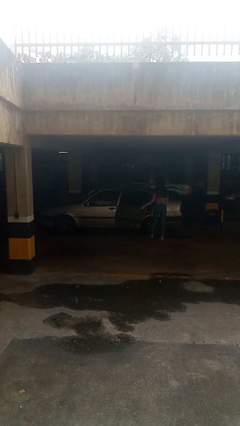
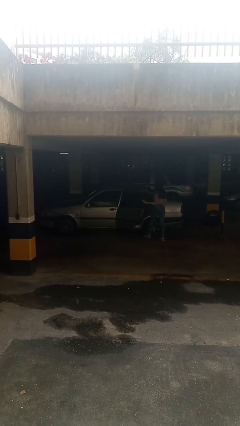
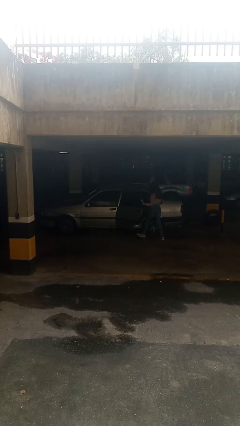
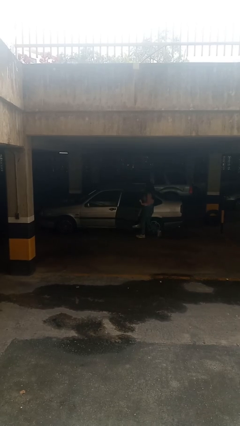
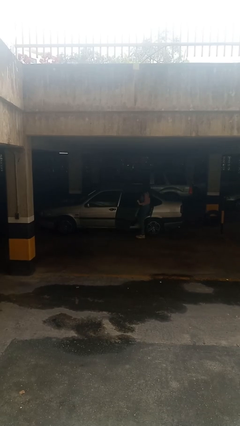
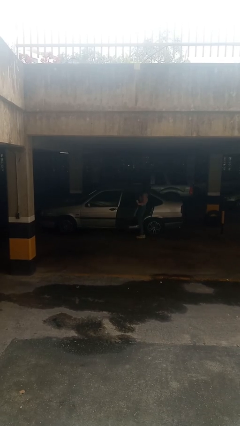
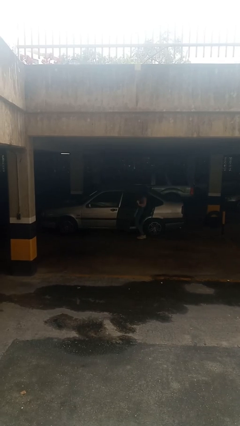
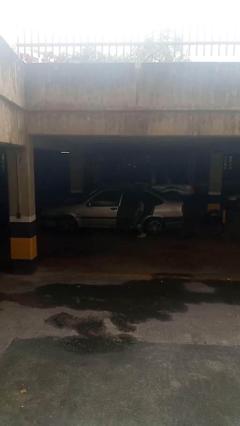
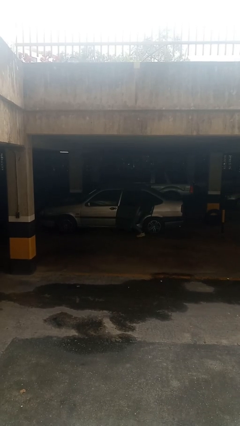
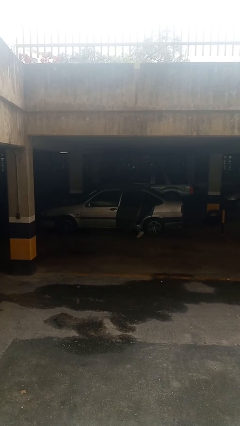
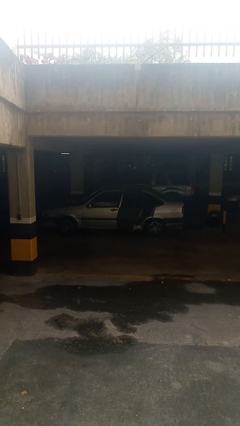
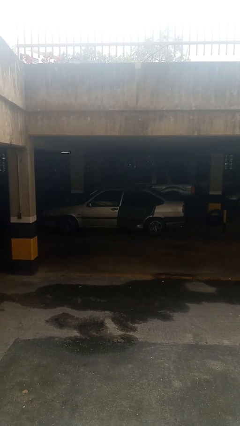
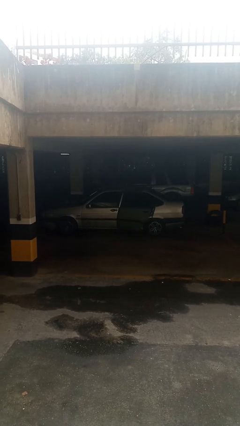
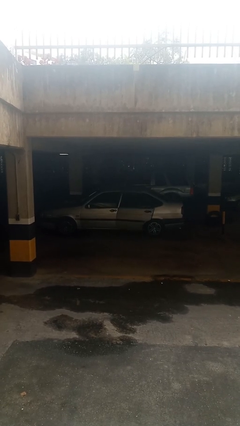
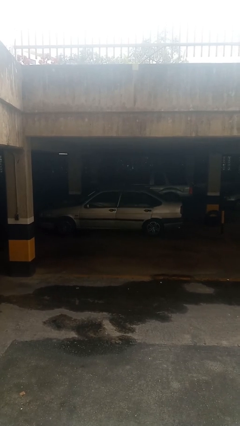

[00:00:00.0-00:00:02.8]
car picks up person

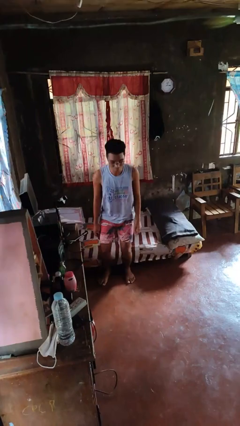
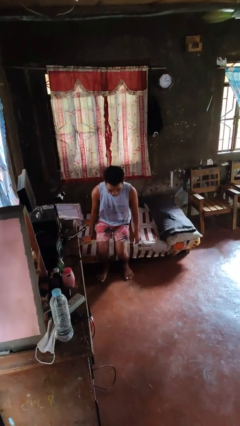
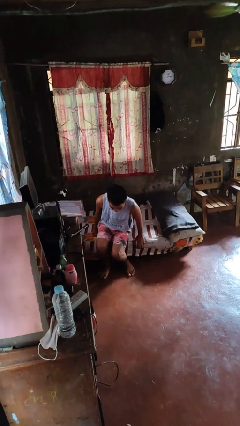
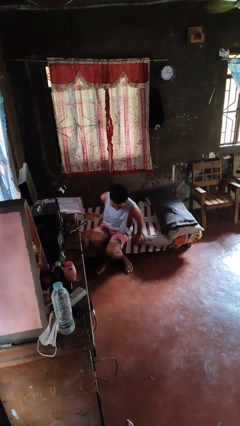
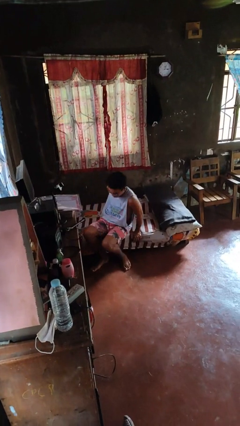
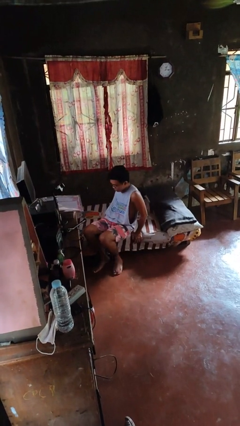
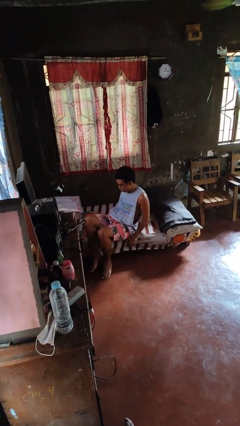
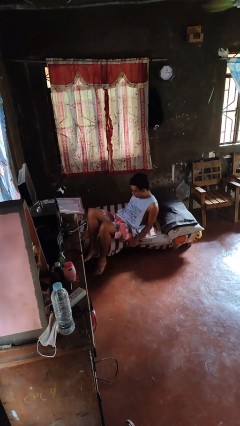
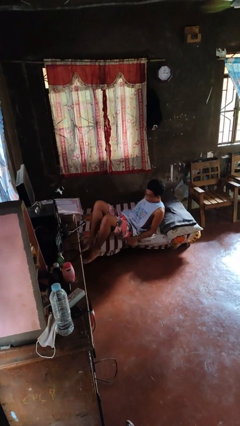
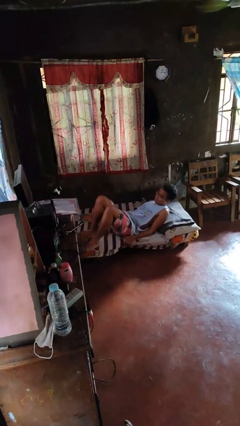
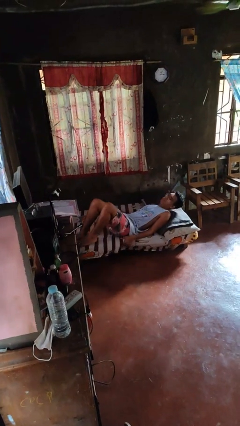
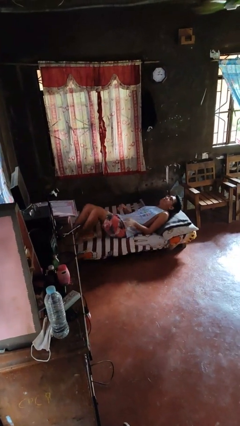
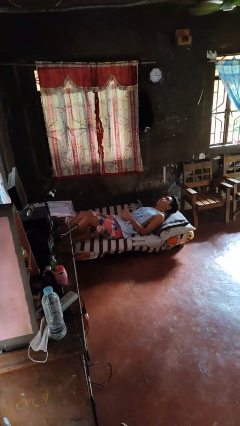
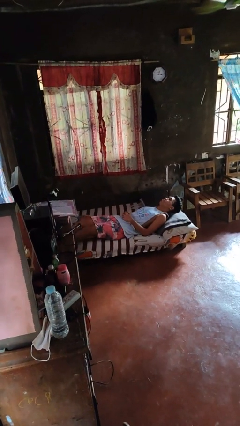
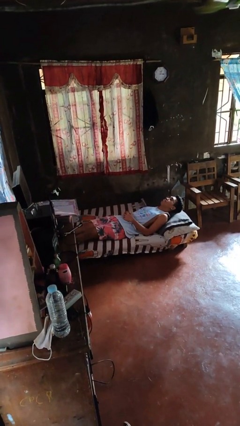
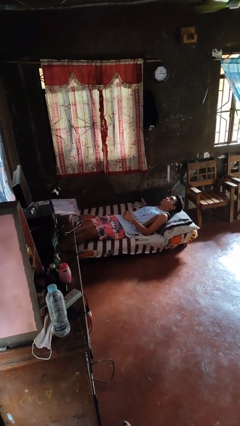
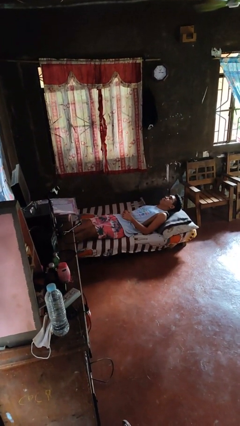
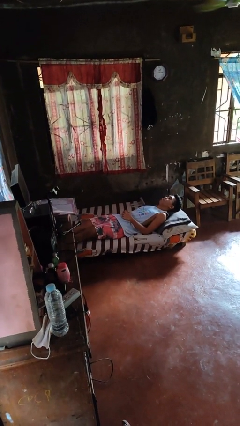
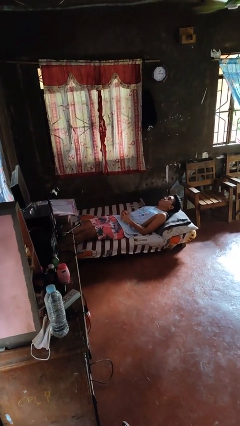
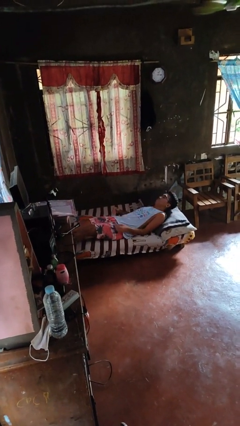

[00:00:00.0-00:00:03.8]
person lies down on bed

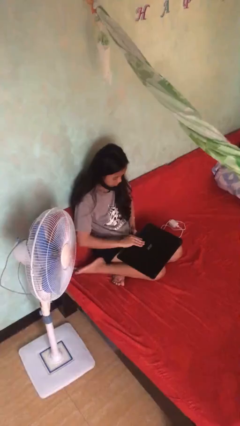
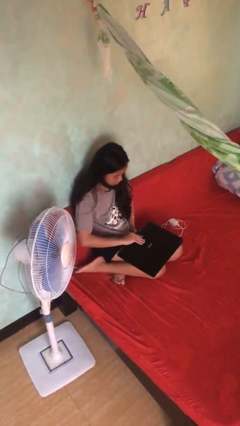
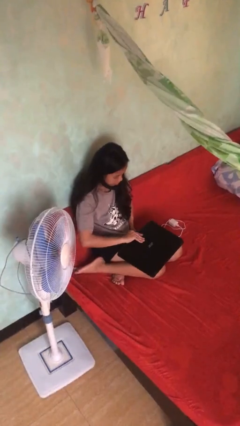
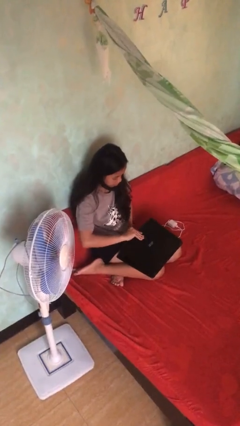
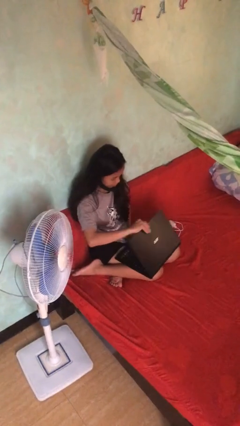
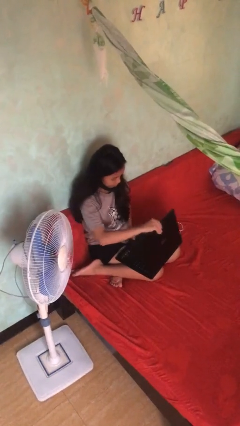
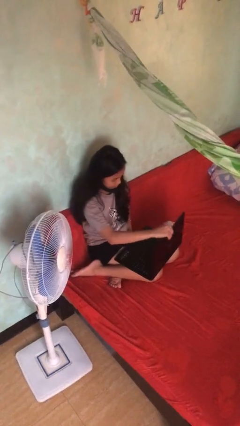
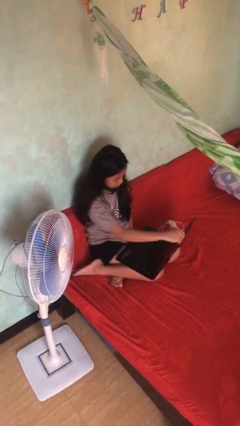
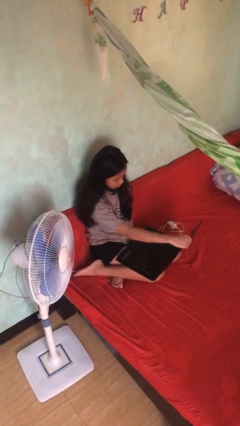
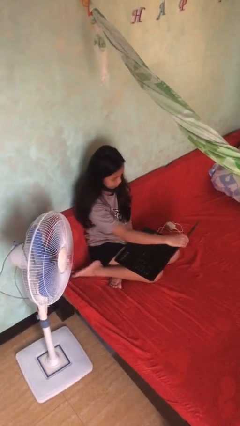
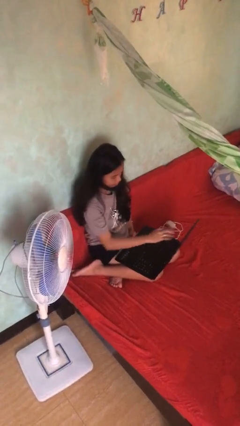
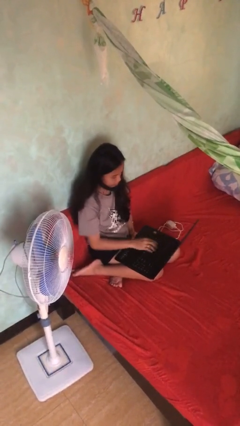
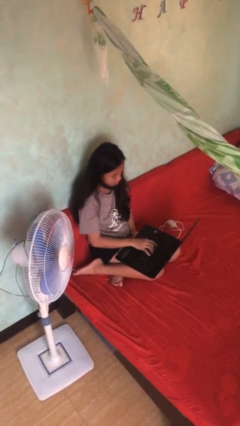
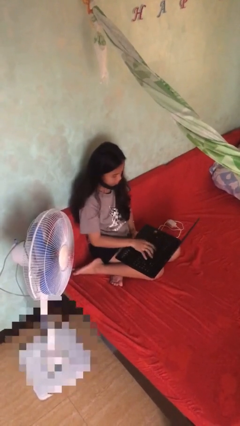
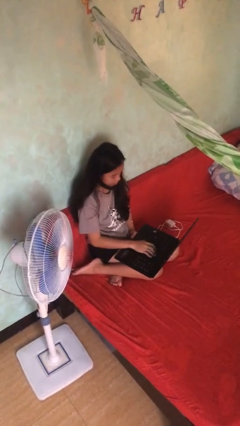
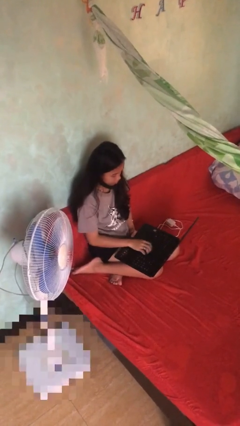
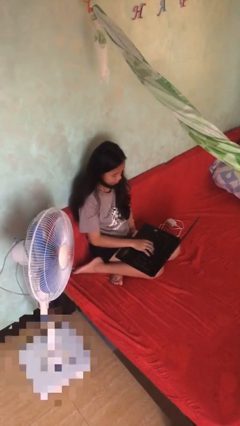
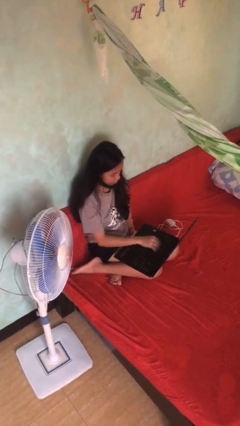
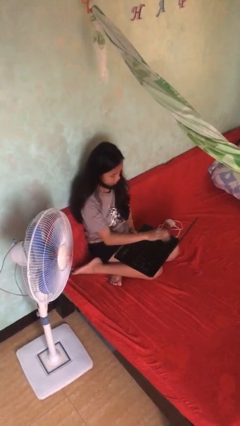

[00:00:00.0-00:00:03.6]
person interacts with laptop

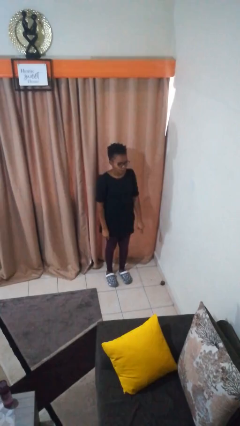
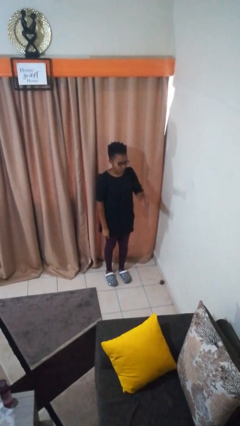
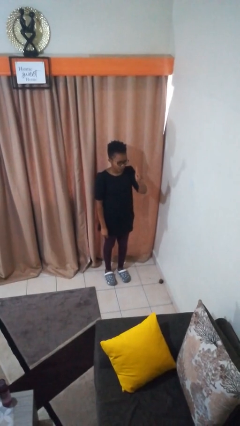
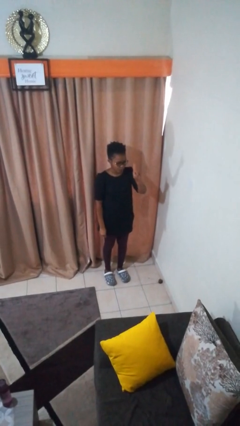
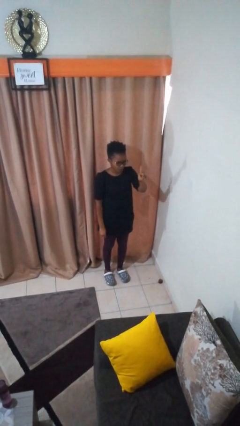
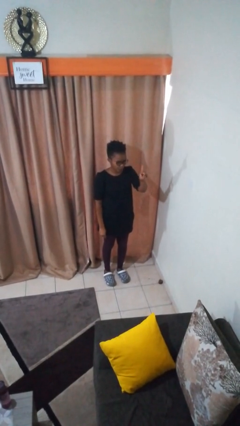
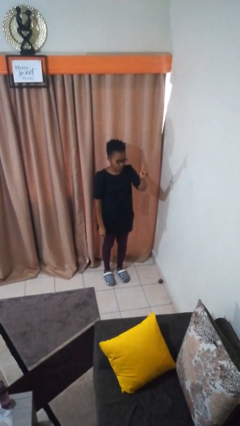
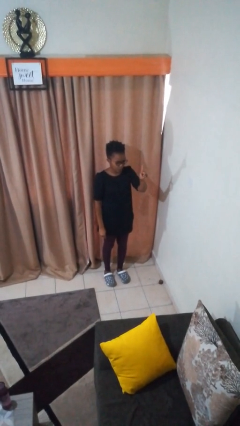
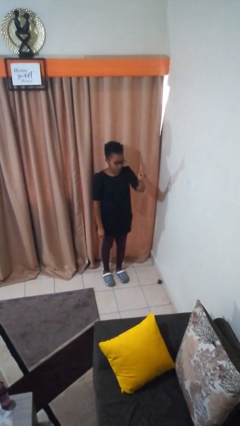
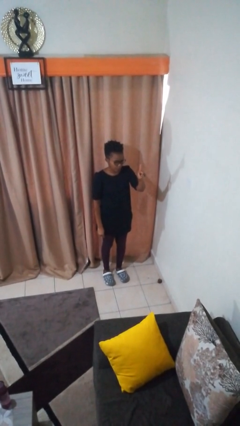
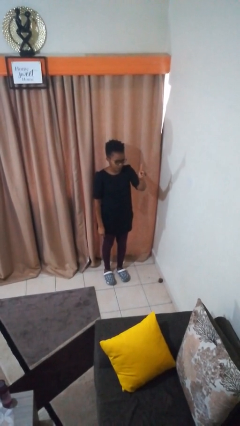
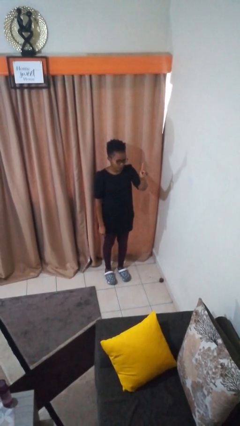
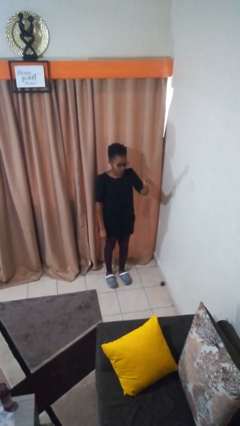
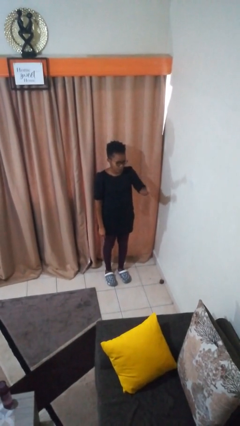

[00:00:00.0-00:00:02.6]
person gestures number one

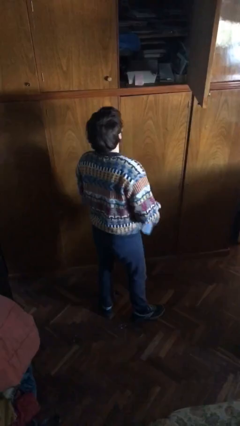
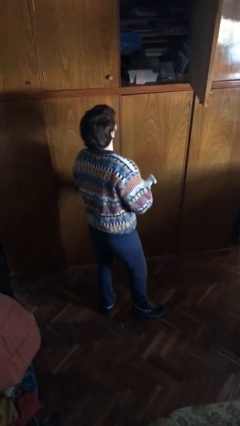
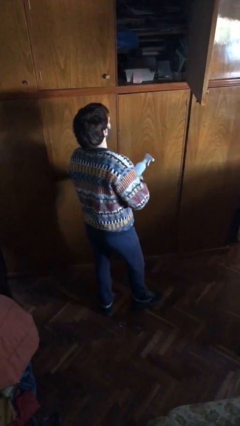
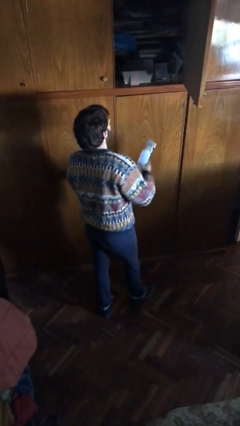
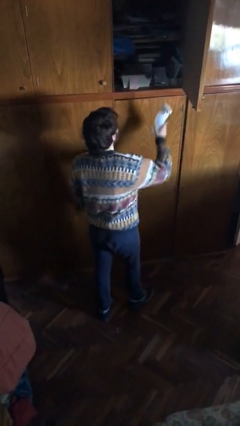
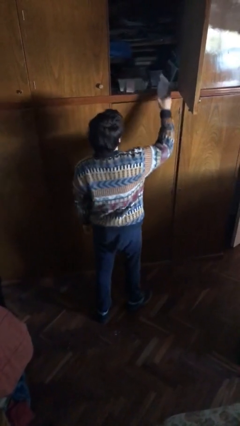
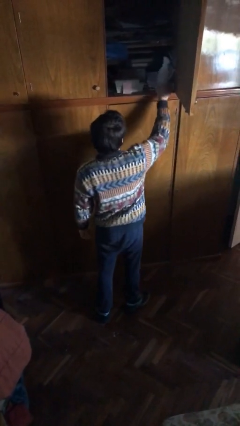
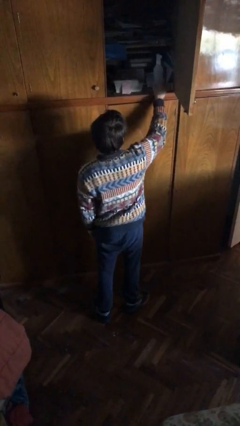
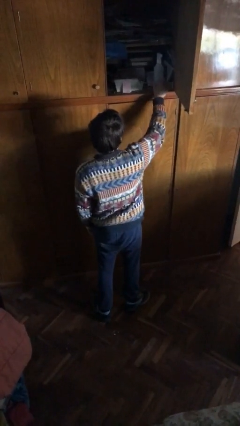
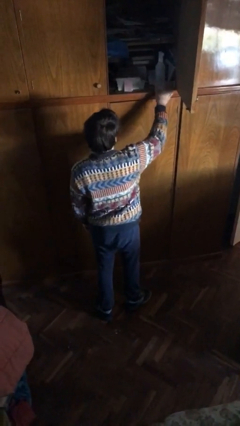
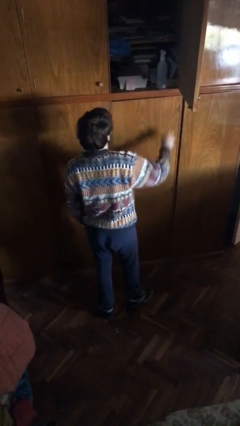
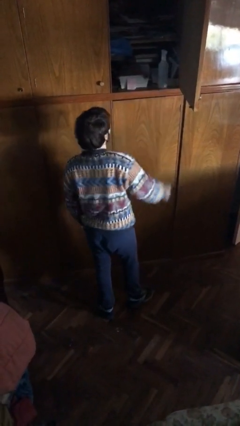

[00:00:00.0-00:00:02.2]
person puts down object into cabinet

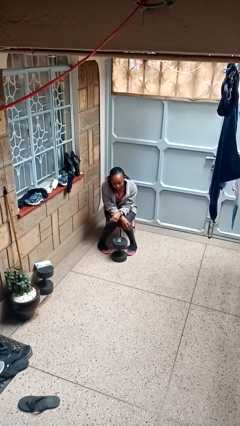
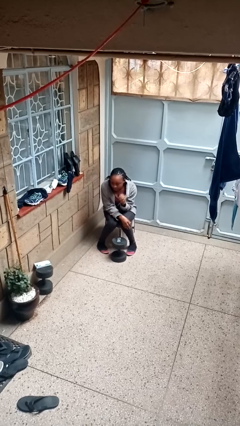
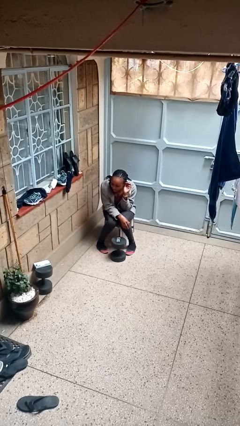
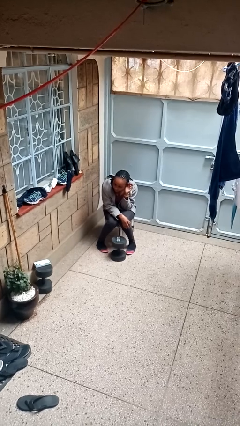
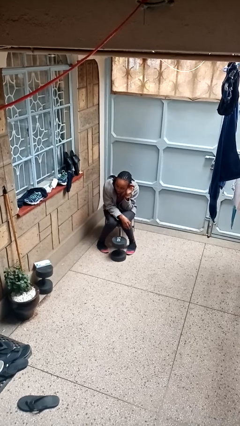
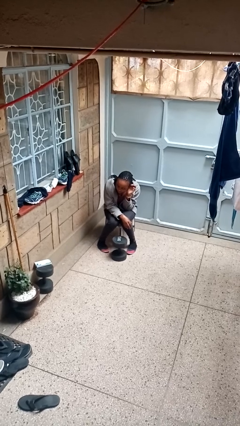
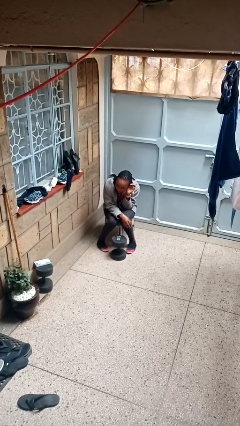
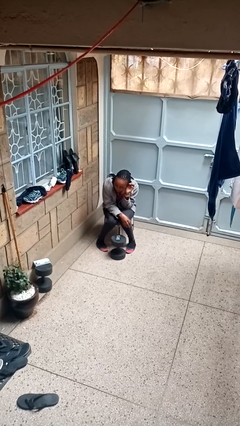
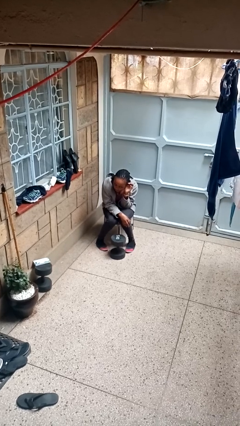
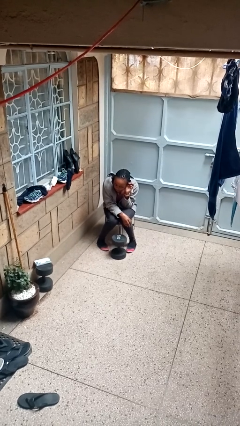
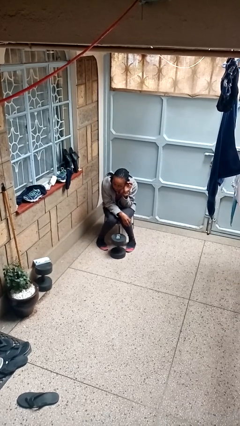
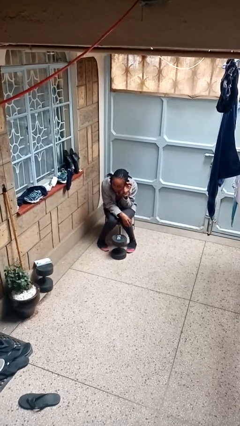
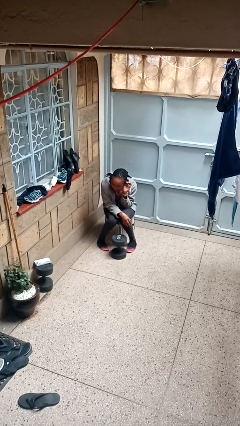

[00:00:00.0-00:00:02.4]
person gestures listen closely

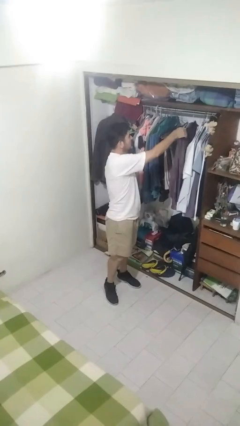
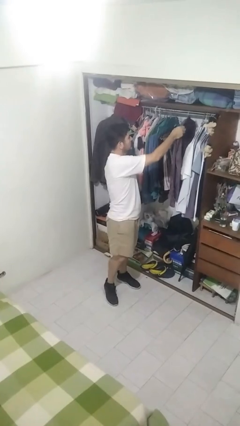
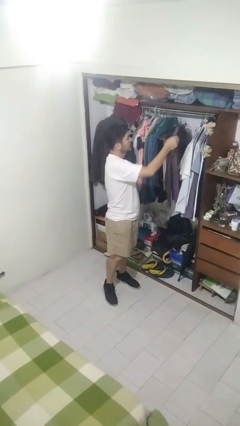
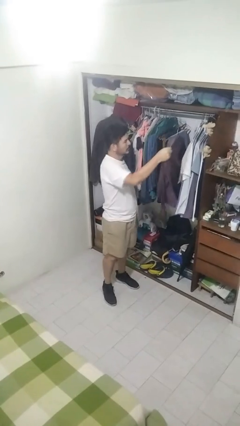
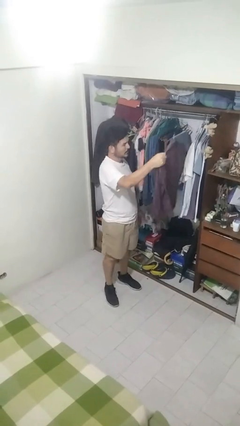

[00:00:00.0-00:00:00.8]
person takes clothes from closet
